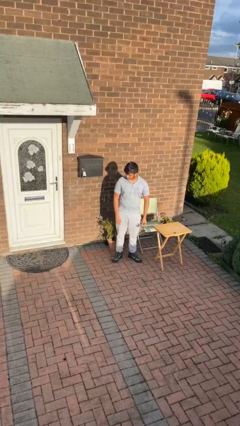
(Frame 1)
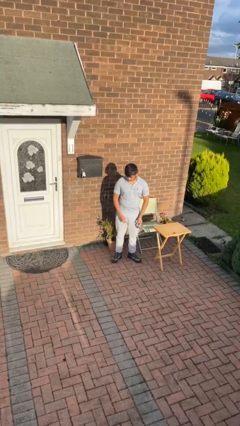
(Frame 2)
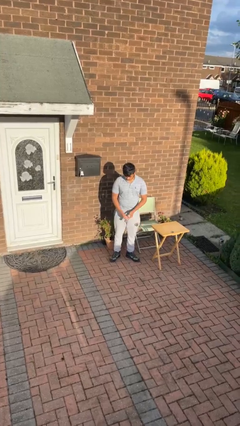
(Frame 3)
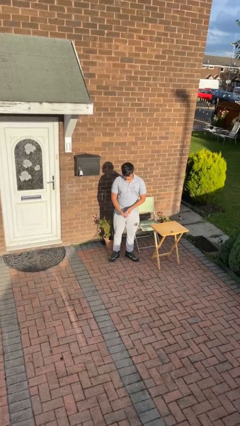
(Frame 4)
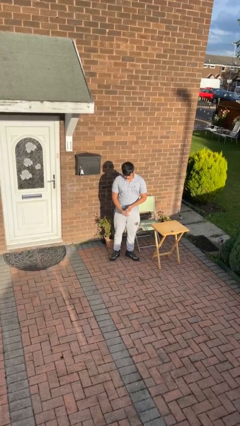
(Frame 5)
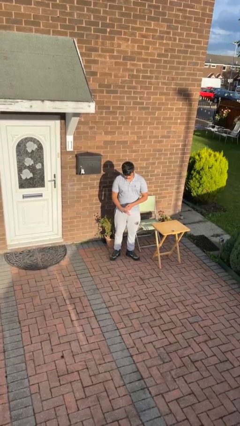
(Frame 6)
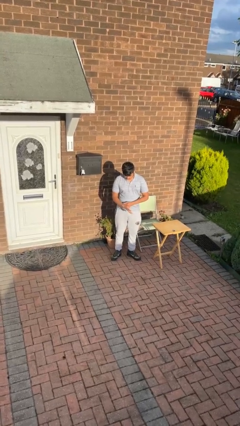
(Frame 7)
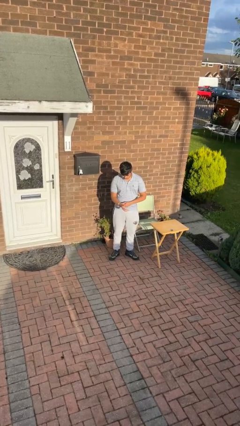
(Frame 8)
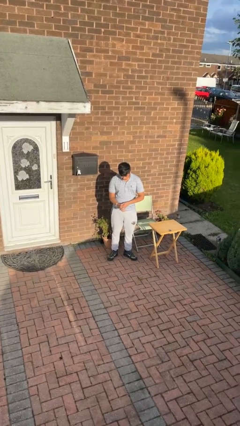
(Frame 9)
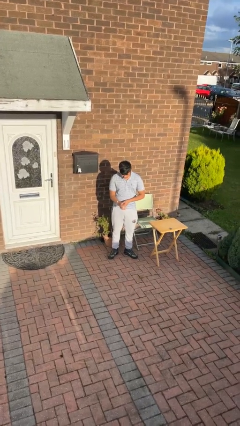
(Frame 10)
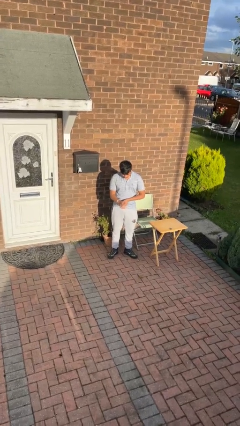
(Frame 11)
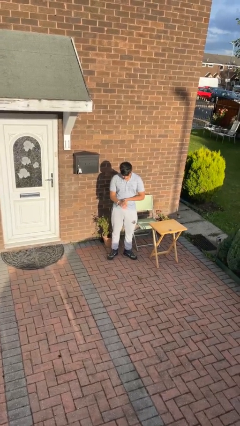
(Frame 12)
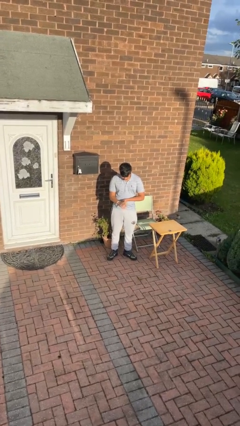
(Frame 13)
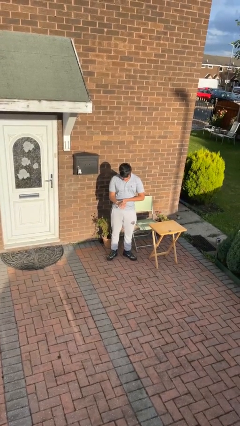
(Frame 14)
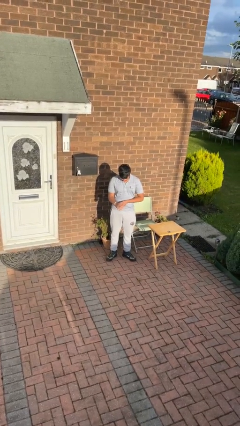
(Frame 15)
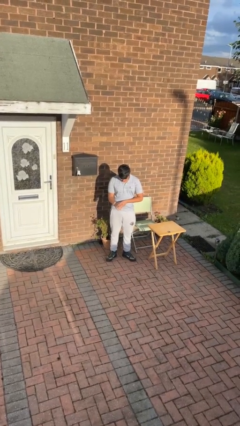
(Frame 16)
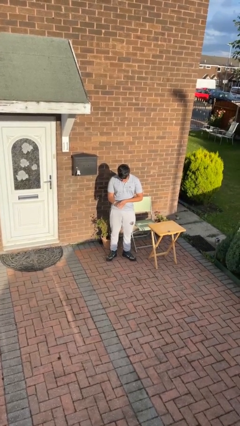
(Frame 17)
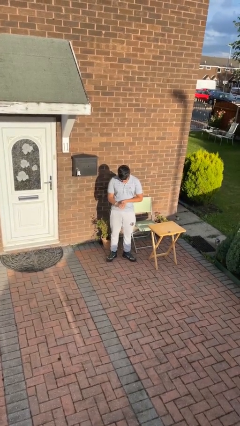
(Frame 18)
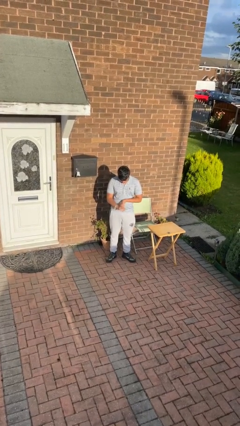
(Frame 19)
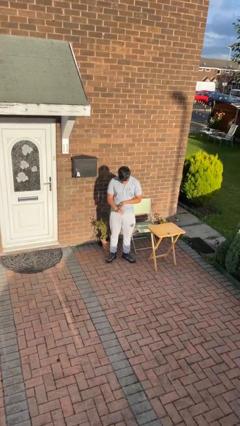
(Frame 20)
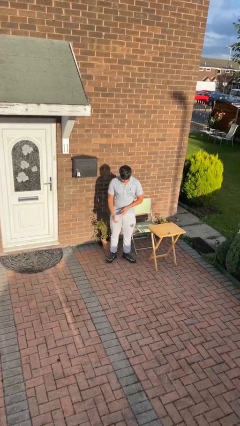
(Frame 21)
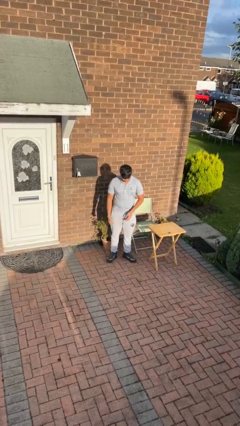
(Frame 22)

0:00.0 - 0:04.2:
person puts on wristwatch

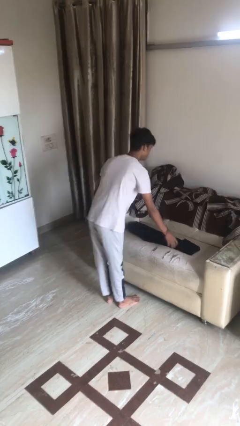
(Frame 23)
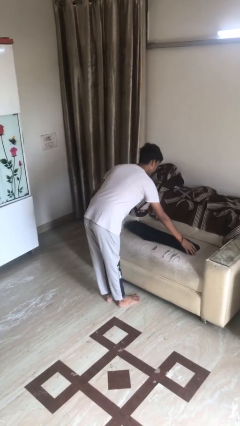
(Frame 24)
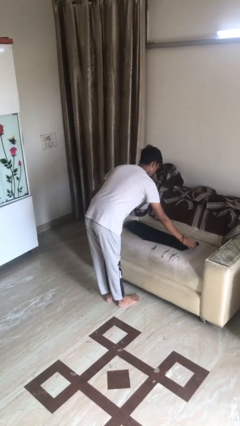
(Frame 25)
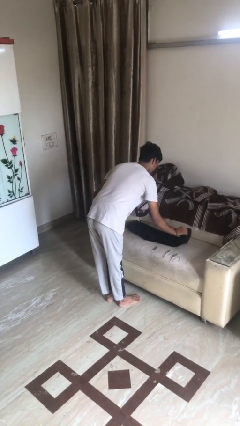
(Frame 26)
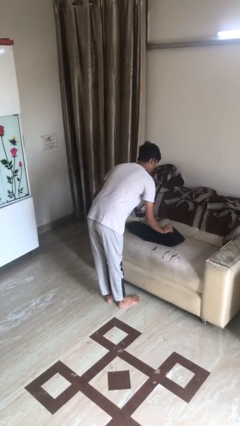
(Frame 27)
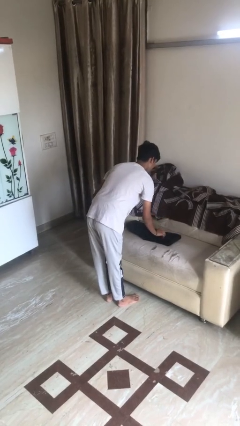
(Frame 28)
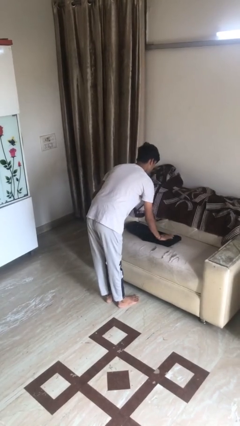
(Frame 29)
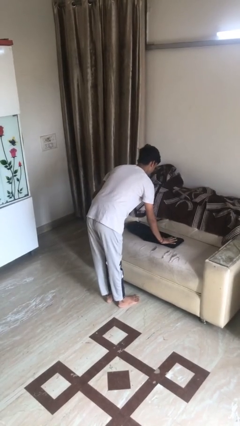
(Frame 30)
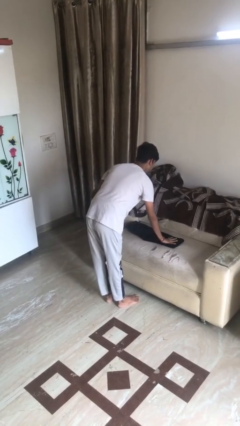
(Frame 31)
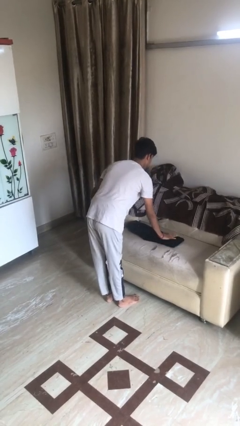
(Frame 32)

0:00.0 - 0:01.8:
person folds pants

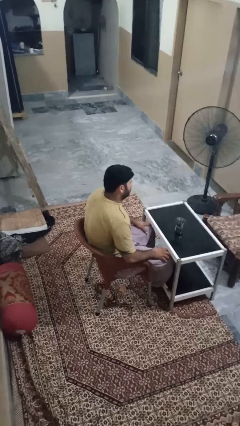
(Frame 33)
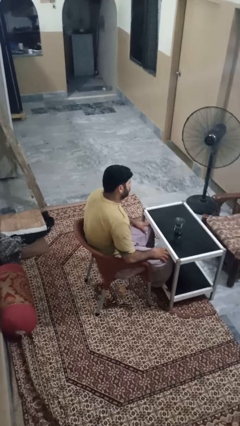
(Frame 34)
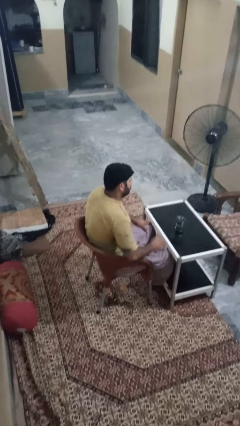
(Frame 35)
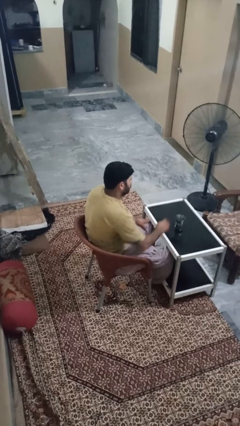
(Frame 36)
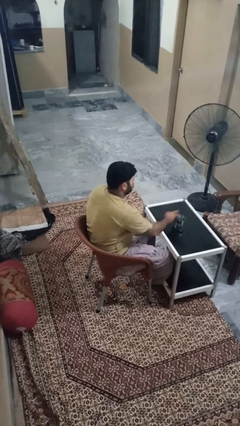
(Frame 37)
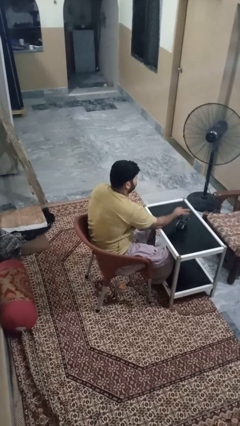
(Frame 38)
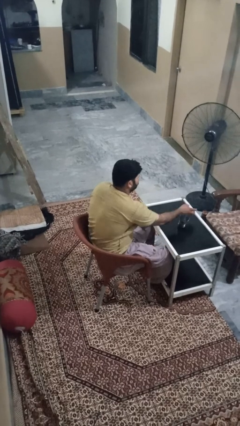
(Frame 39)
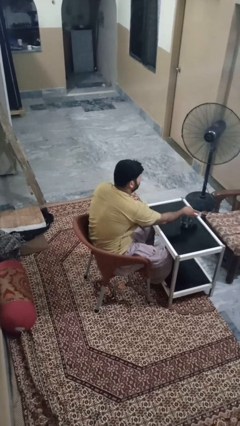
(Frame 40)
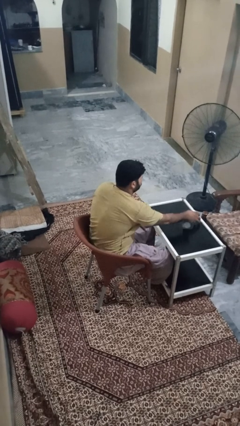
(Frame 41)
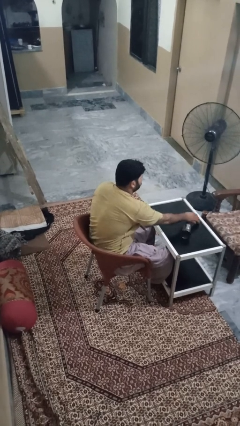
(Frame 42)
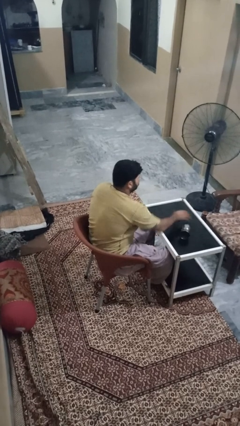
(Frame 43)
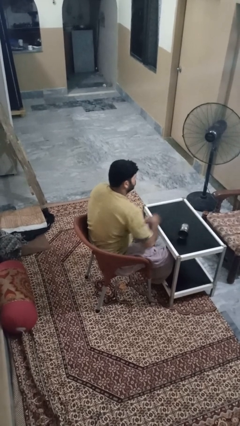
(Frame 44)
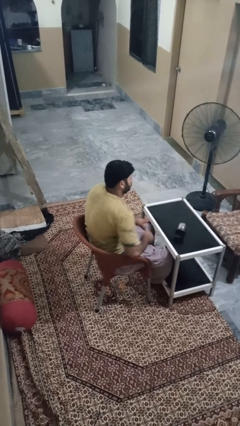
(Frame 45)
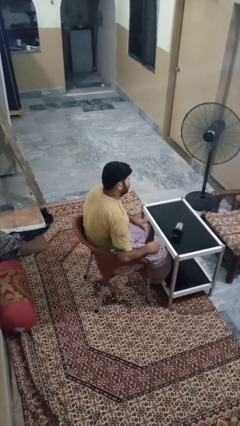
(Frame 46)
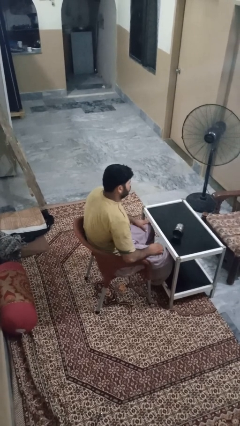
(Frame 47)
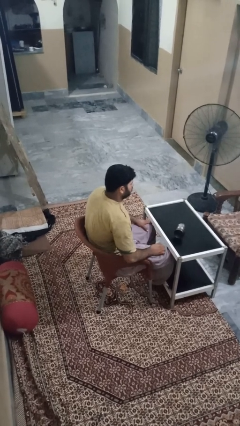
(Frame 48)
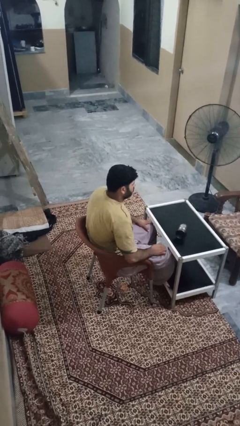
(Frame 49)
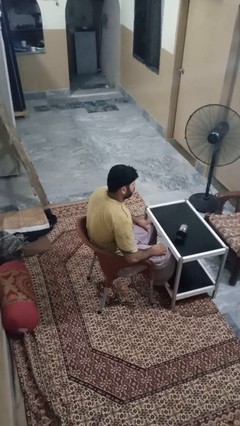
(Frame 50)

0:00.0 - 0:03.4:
person knocks over glass

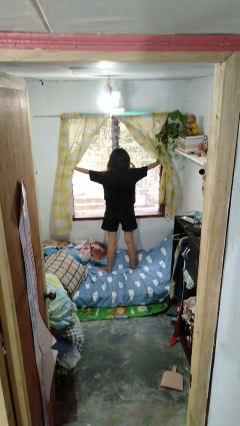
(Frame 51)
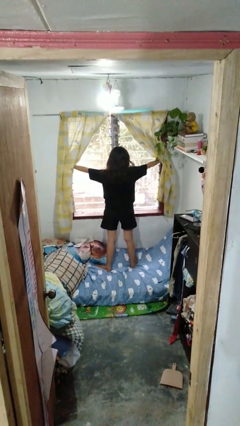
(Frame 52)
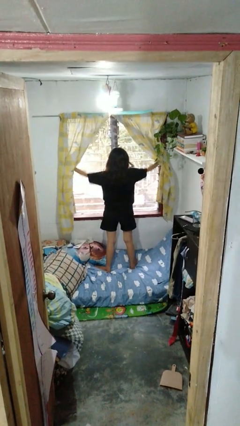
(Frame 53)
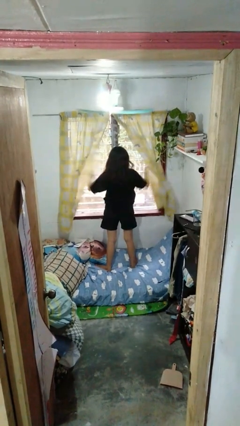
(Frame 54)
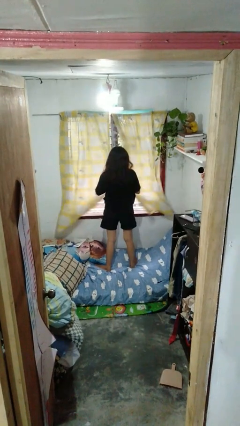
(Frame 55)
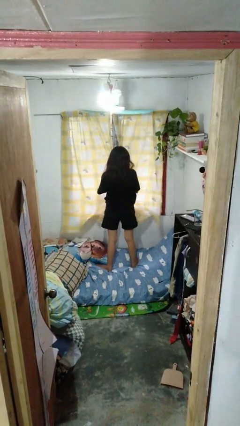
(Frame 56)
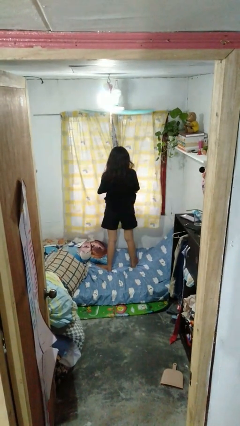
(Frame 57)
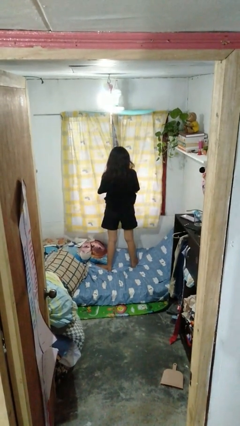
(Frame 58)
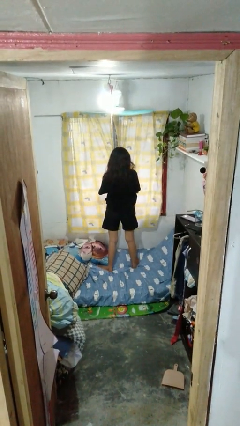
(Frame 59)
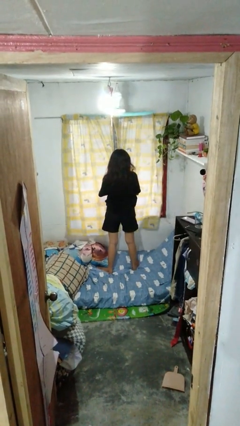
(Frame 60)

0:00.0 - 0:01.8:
person closes curtains

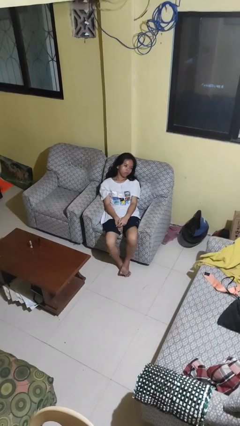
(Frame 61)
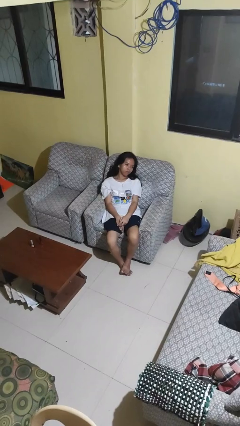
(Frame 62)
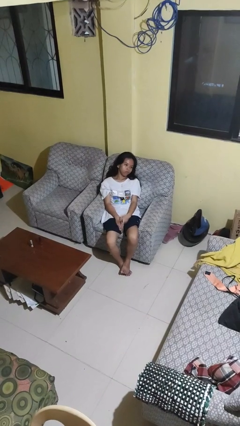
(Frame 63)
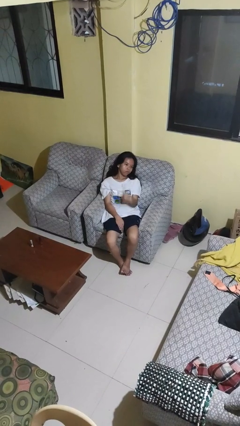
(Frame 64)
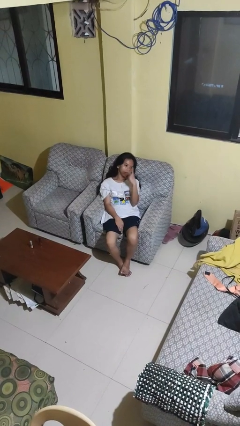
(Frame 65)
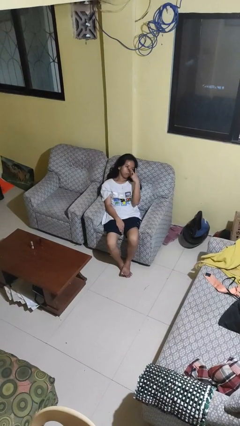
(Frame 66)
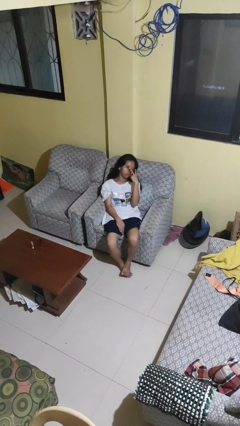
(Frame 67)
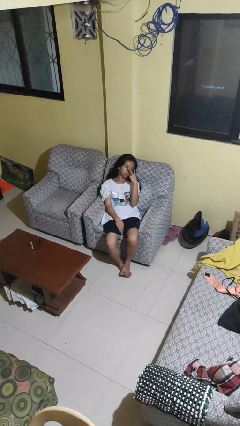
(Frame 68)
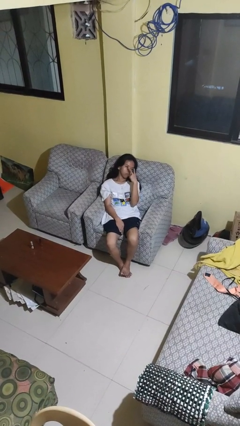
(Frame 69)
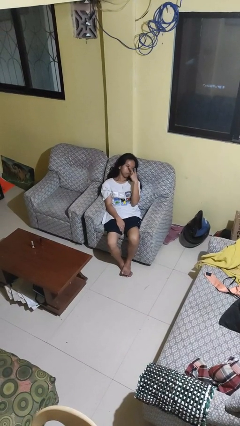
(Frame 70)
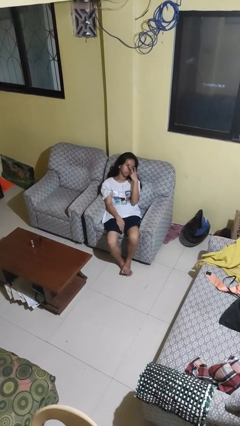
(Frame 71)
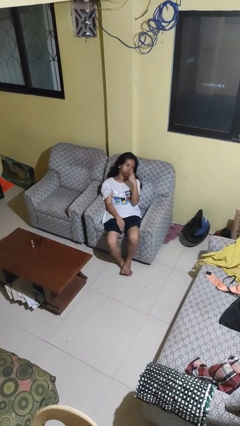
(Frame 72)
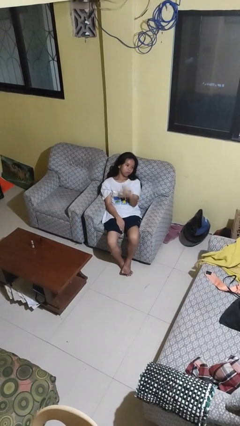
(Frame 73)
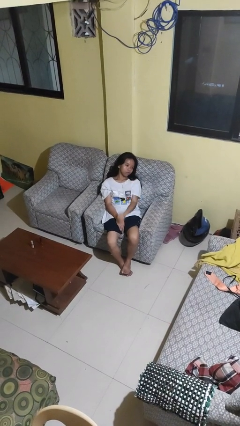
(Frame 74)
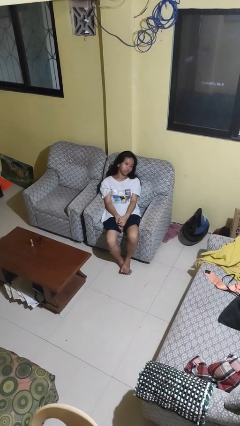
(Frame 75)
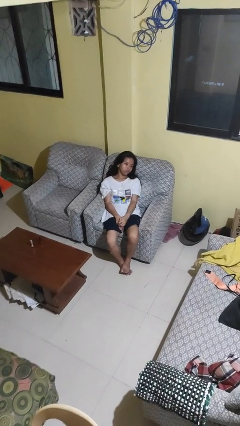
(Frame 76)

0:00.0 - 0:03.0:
person gestures watch closely

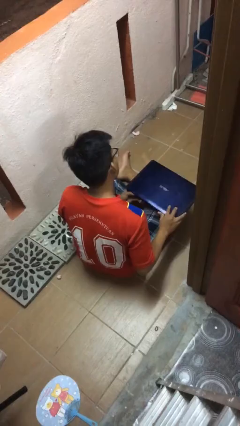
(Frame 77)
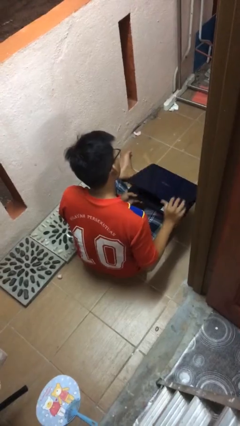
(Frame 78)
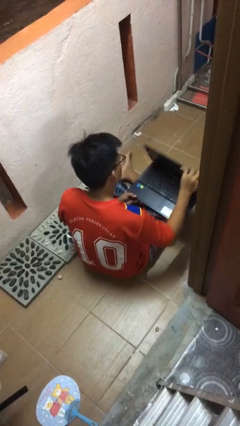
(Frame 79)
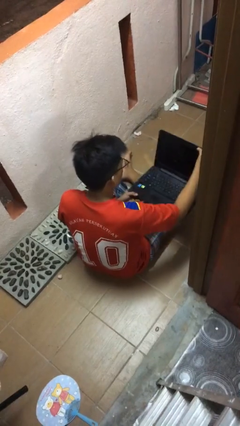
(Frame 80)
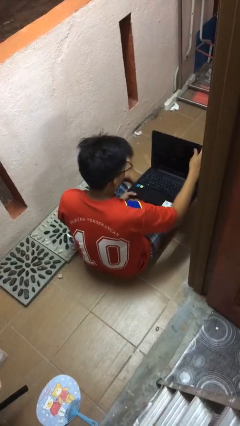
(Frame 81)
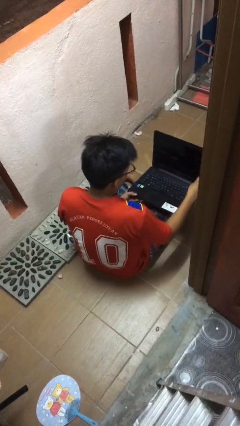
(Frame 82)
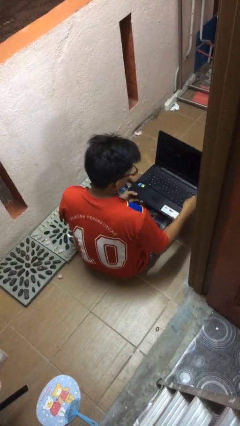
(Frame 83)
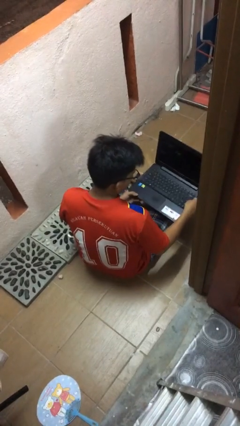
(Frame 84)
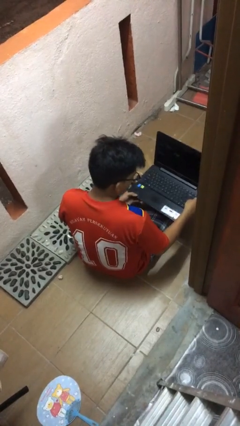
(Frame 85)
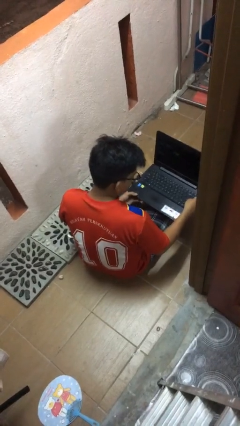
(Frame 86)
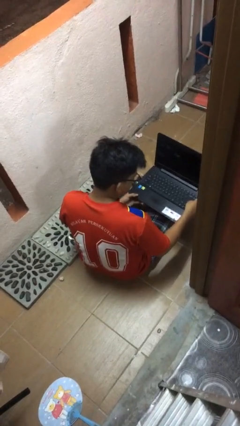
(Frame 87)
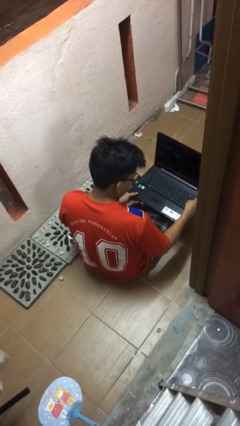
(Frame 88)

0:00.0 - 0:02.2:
person opens laptop

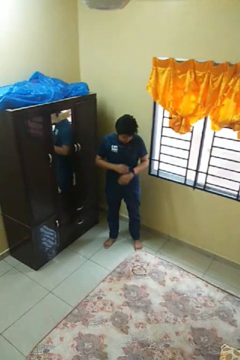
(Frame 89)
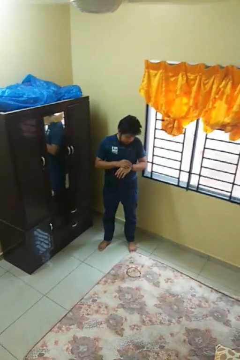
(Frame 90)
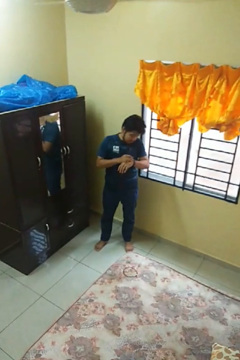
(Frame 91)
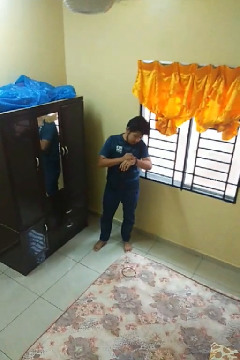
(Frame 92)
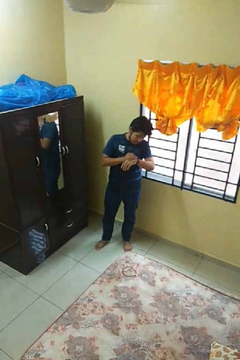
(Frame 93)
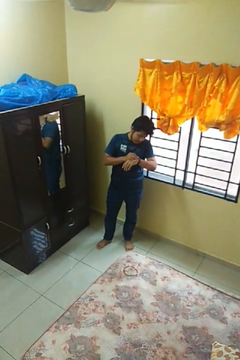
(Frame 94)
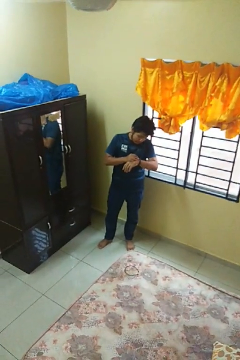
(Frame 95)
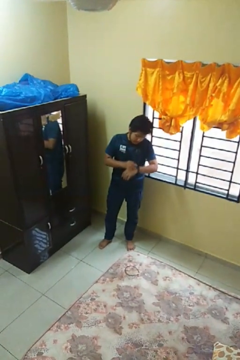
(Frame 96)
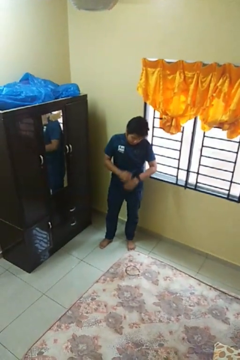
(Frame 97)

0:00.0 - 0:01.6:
person looks at wristwatch
